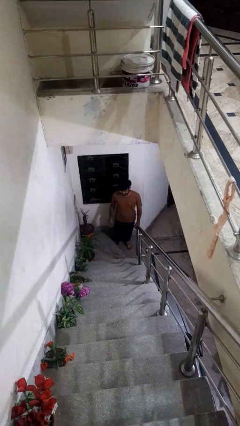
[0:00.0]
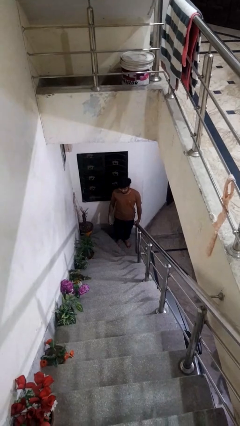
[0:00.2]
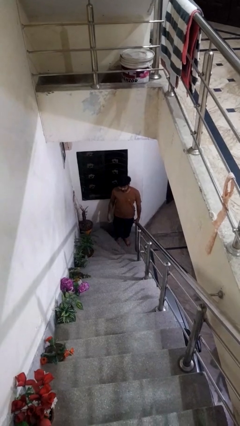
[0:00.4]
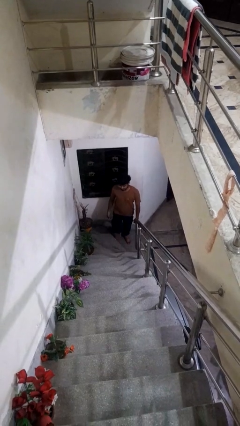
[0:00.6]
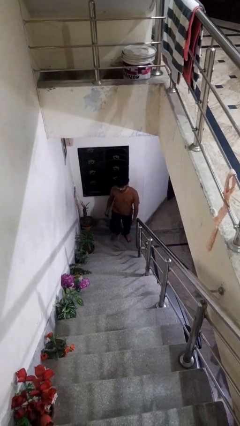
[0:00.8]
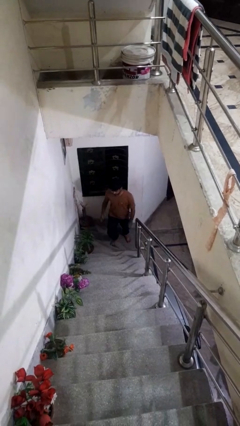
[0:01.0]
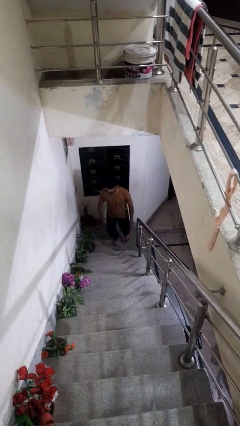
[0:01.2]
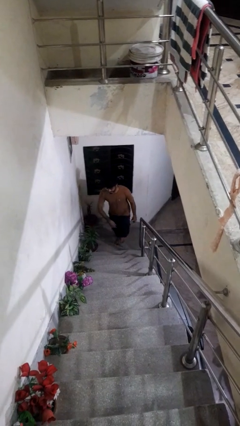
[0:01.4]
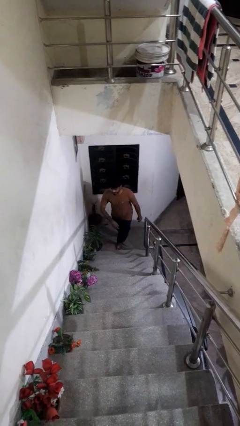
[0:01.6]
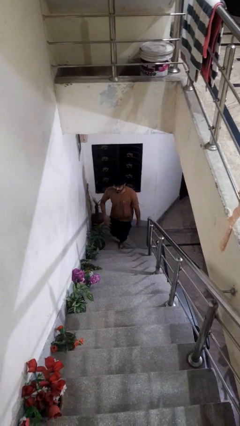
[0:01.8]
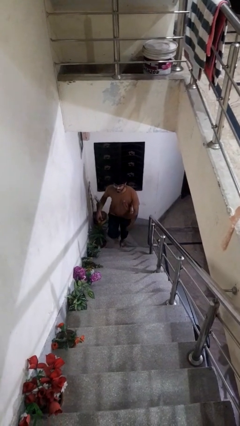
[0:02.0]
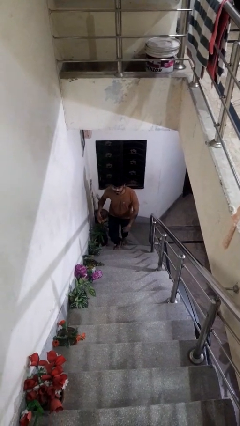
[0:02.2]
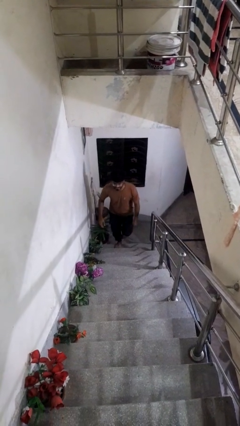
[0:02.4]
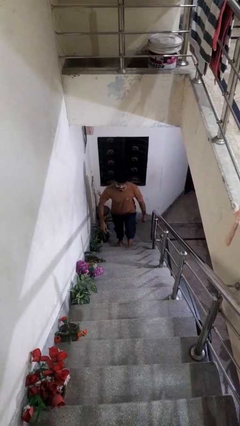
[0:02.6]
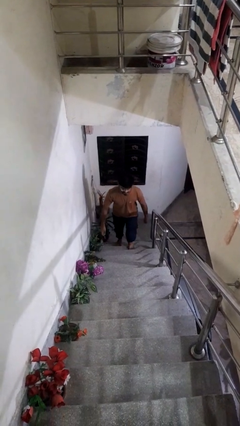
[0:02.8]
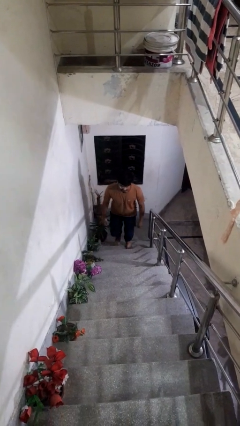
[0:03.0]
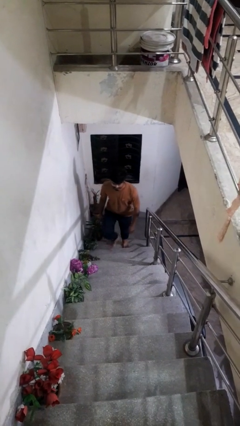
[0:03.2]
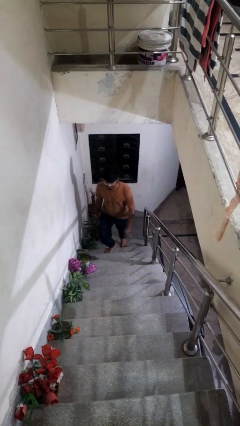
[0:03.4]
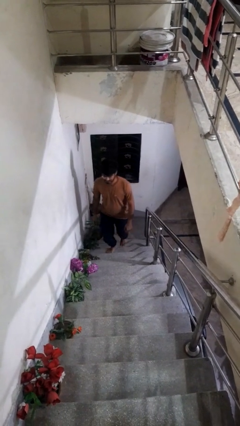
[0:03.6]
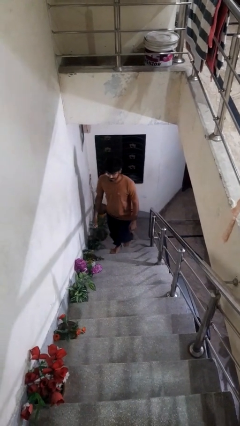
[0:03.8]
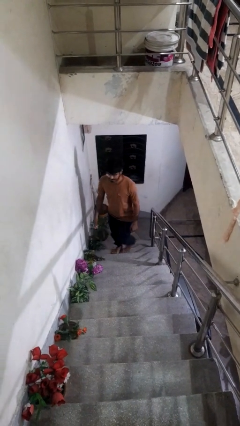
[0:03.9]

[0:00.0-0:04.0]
person climbs up stairs

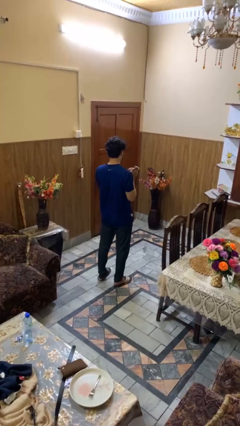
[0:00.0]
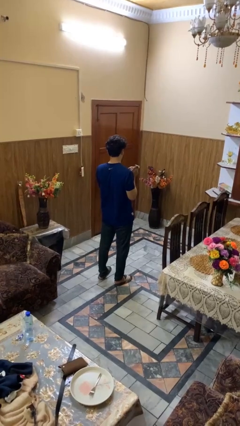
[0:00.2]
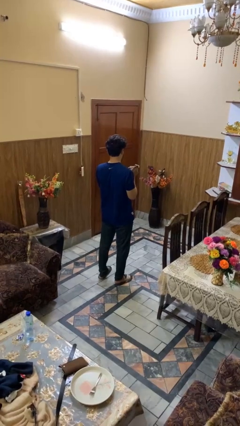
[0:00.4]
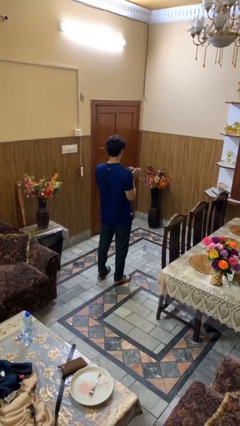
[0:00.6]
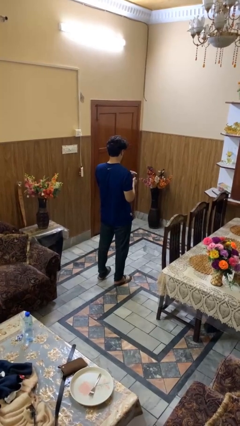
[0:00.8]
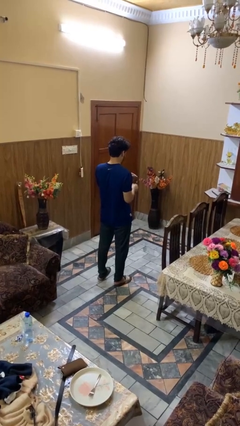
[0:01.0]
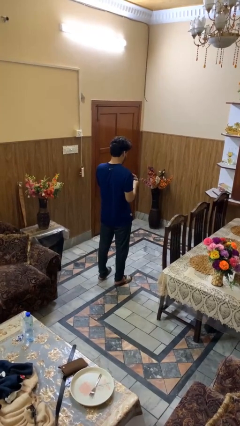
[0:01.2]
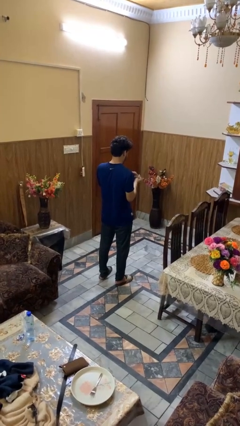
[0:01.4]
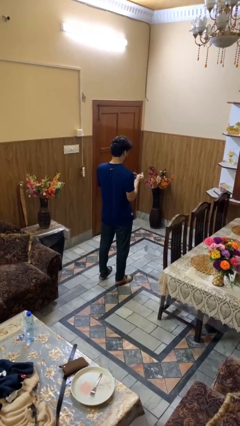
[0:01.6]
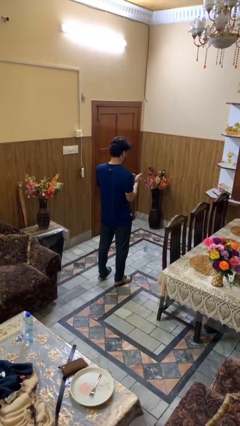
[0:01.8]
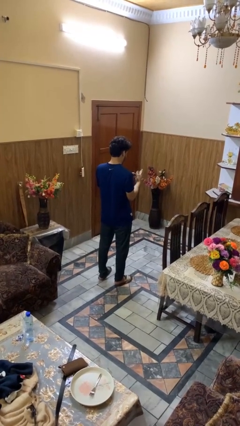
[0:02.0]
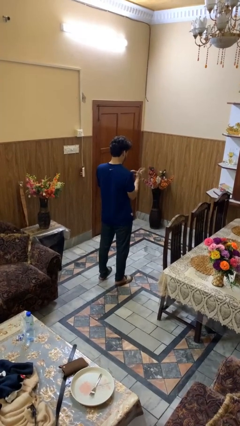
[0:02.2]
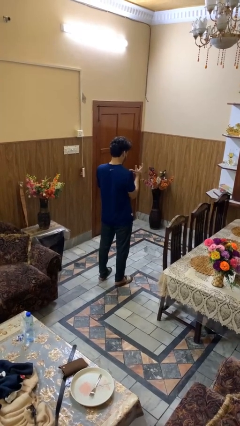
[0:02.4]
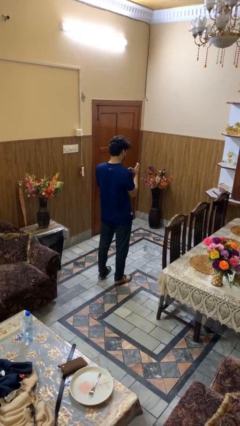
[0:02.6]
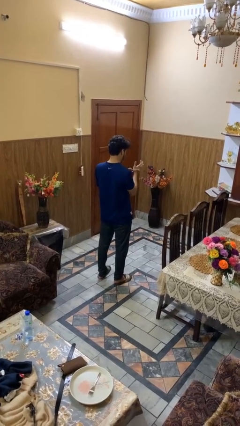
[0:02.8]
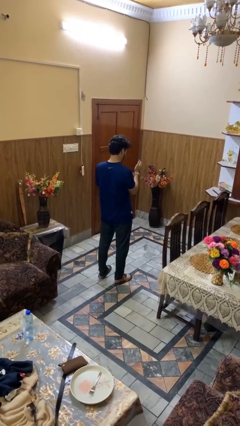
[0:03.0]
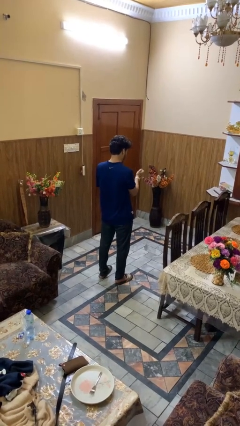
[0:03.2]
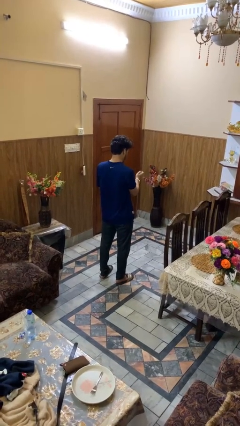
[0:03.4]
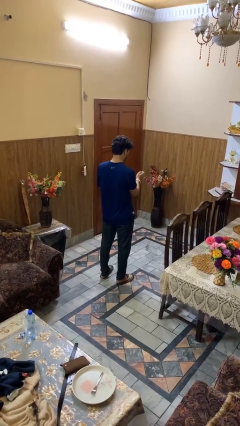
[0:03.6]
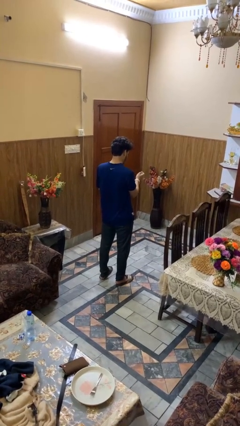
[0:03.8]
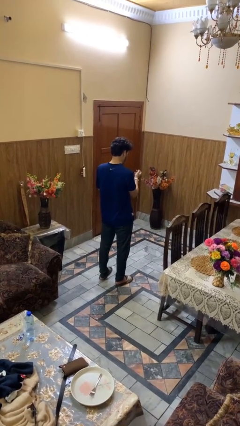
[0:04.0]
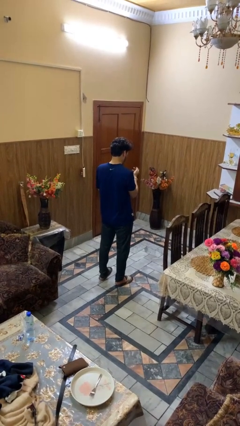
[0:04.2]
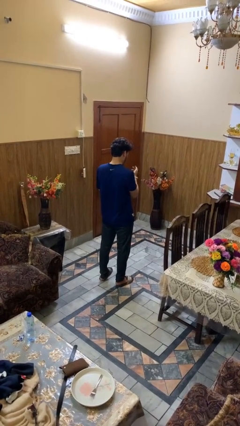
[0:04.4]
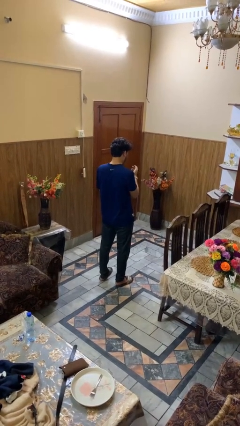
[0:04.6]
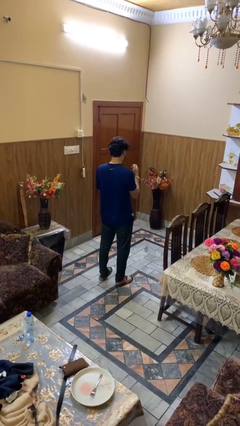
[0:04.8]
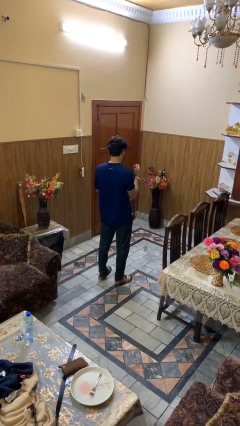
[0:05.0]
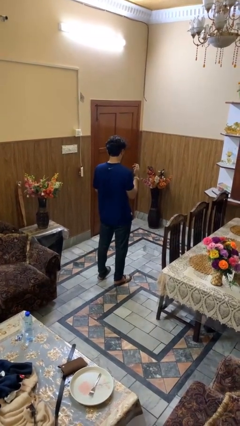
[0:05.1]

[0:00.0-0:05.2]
person puts on wristwatch

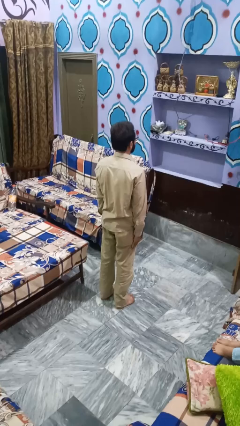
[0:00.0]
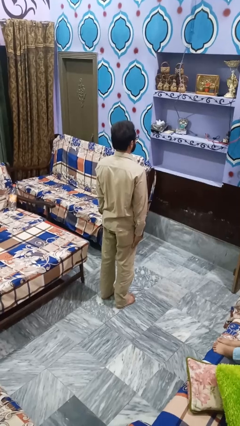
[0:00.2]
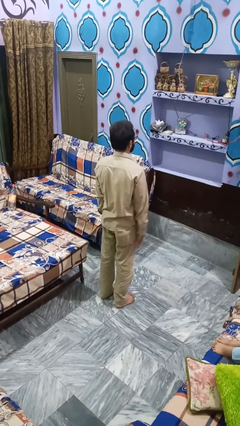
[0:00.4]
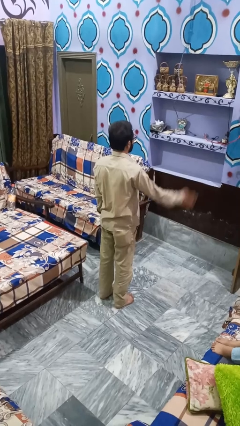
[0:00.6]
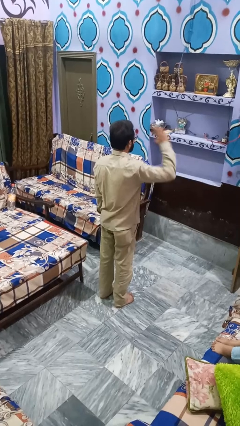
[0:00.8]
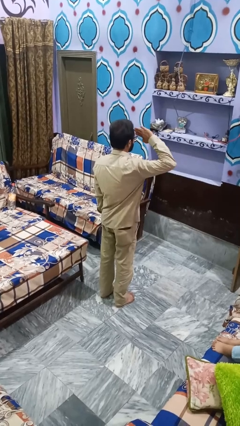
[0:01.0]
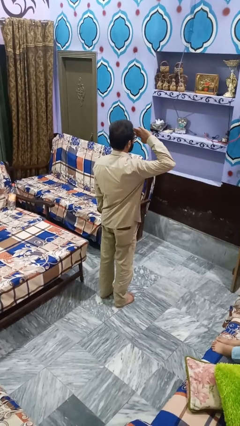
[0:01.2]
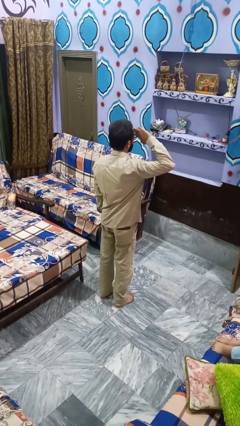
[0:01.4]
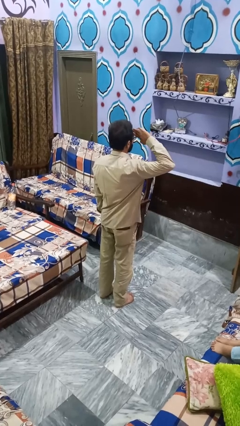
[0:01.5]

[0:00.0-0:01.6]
person salutes

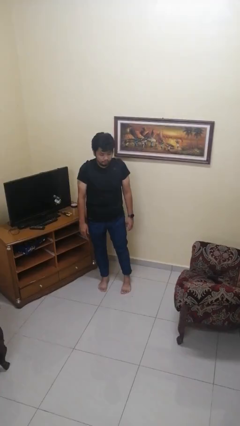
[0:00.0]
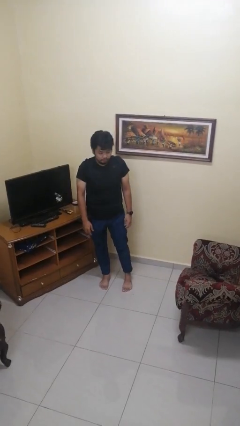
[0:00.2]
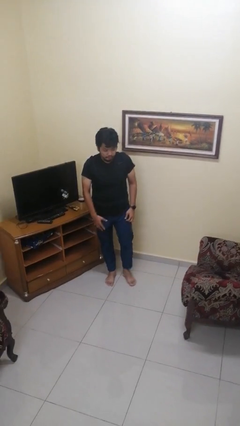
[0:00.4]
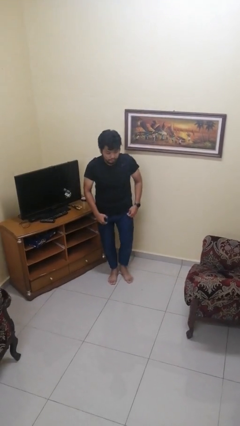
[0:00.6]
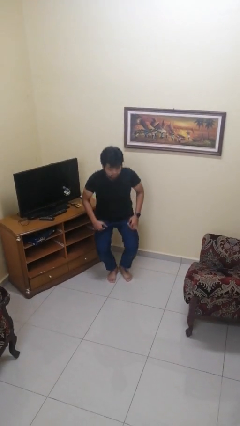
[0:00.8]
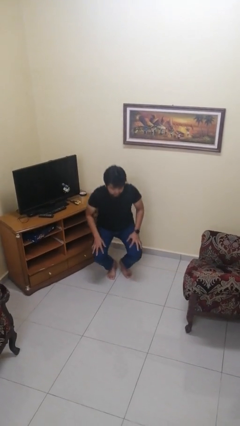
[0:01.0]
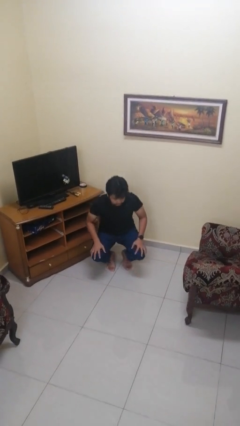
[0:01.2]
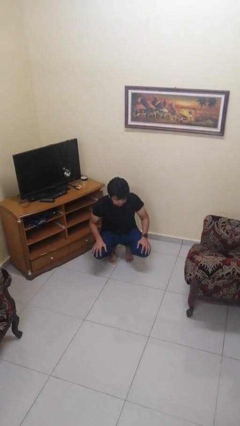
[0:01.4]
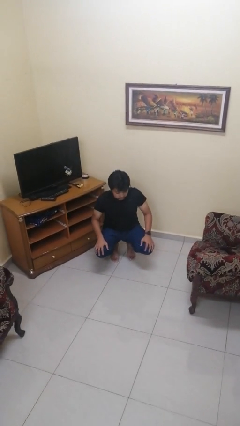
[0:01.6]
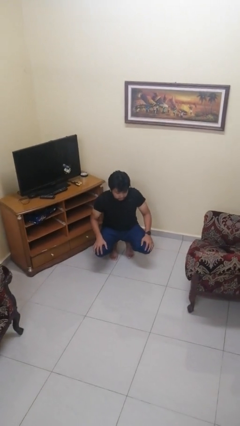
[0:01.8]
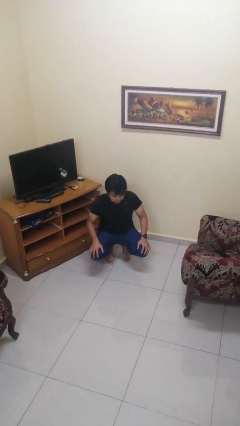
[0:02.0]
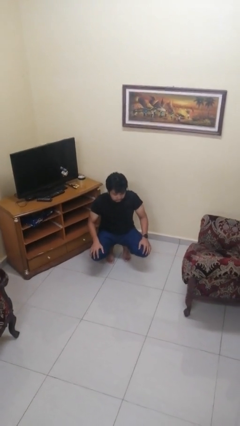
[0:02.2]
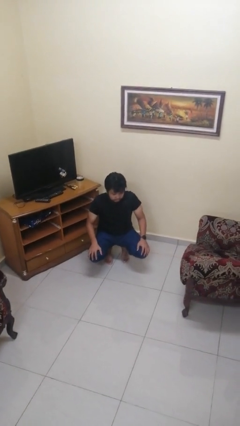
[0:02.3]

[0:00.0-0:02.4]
person squats

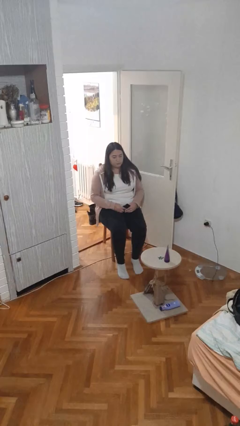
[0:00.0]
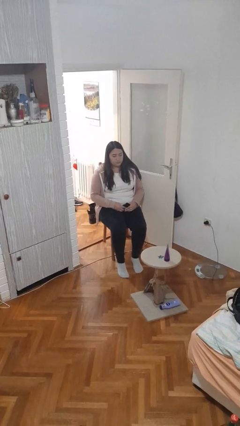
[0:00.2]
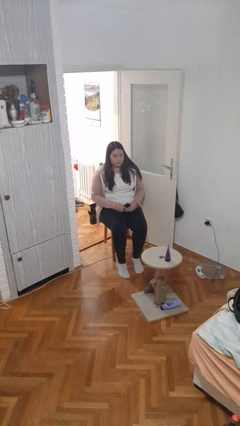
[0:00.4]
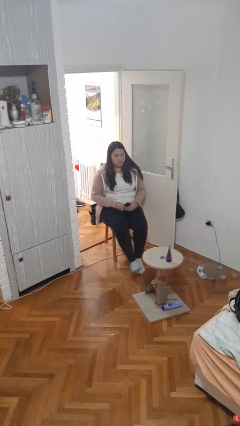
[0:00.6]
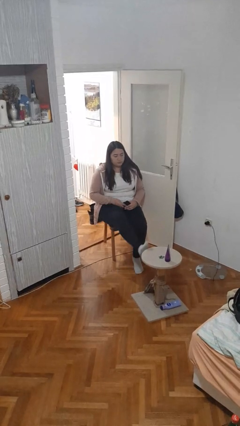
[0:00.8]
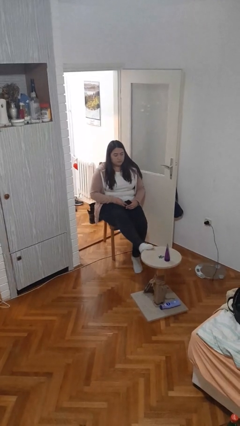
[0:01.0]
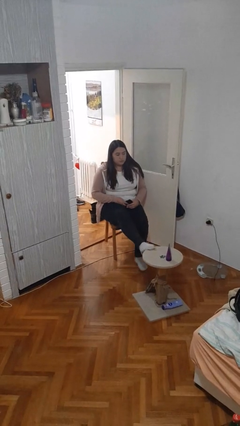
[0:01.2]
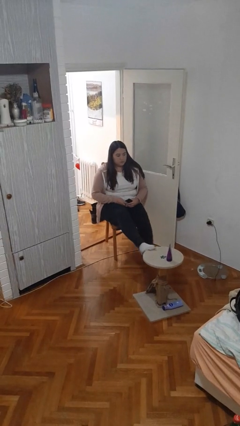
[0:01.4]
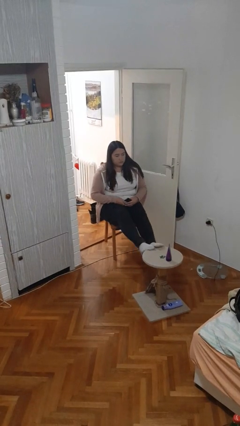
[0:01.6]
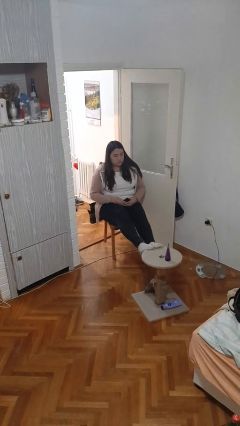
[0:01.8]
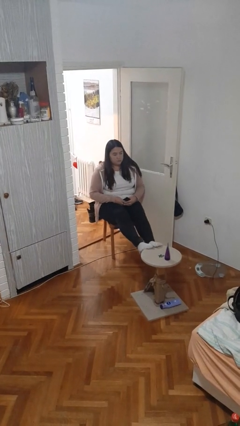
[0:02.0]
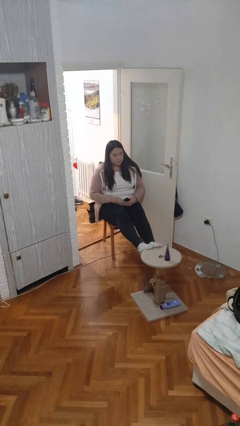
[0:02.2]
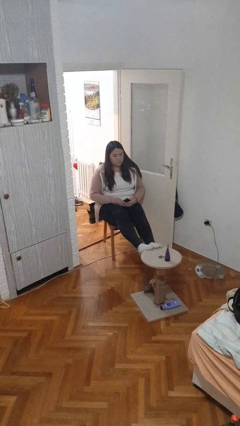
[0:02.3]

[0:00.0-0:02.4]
person puts feet up

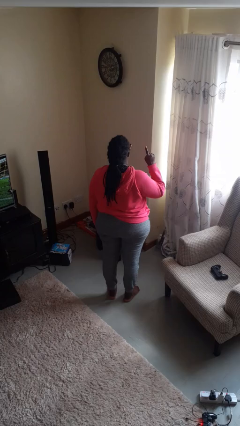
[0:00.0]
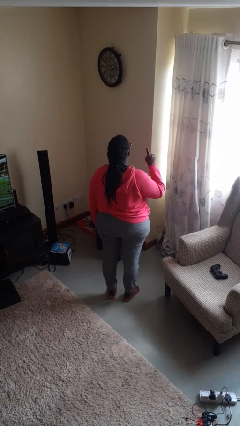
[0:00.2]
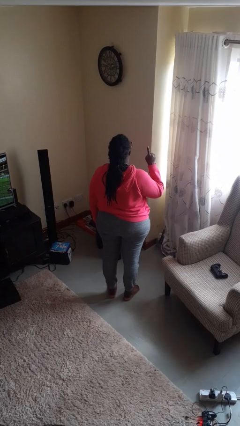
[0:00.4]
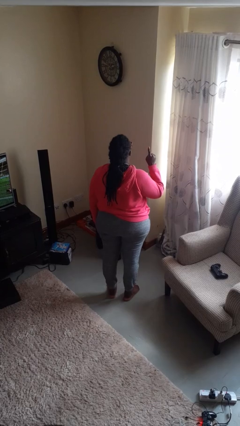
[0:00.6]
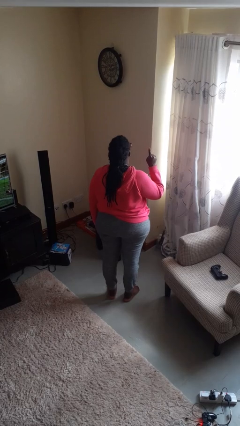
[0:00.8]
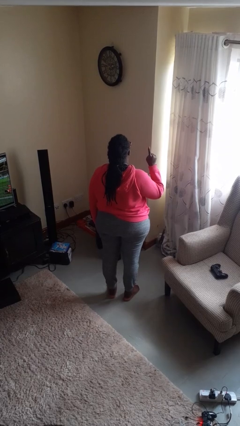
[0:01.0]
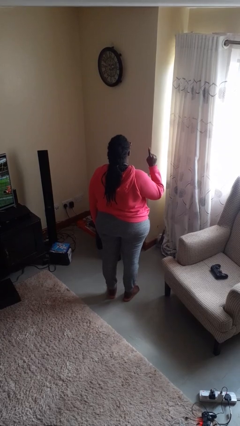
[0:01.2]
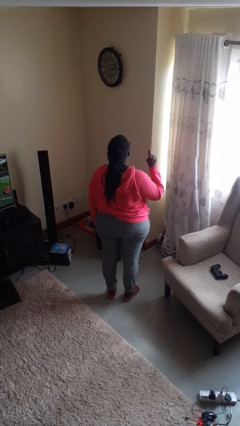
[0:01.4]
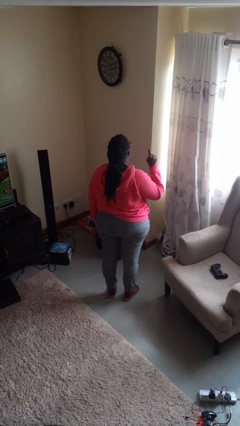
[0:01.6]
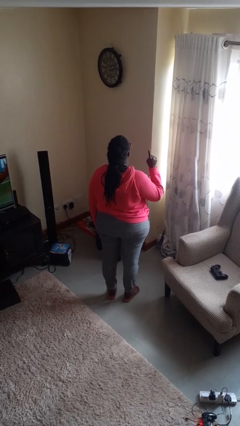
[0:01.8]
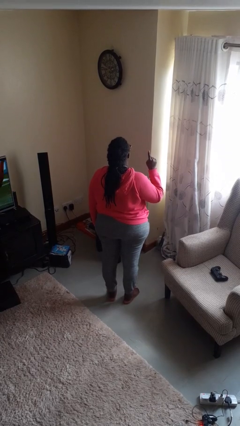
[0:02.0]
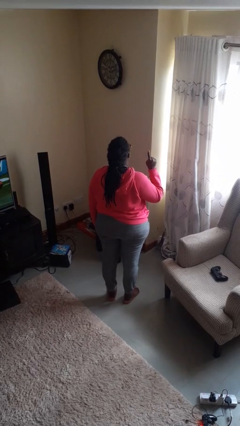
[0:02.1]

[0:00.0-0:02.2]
person gestures number one
